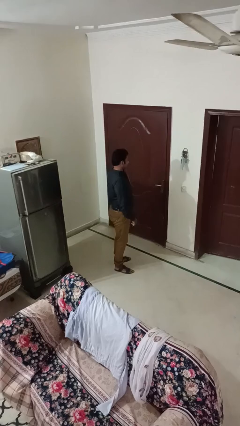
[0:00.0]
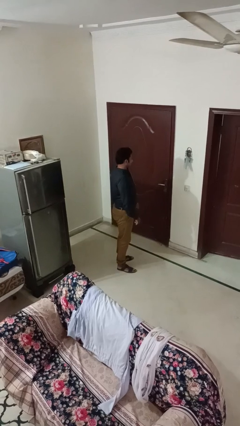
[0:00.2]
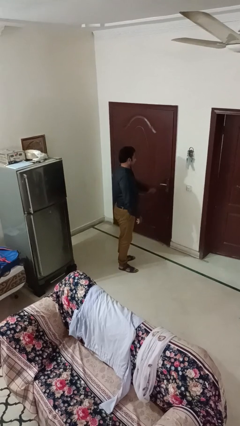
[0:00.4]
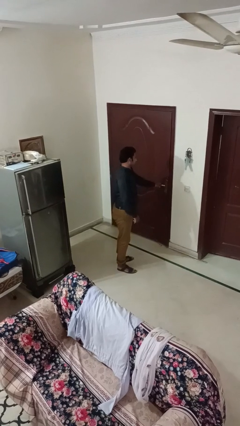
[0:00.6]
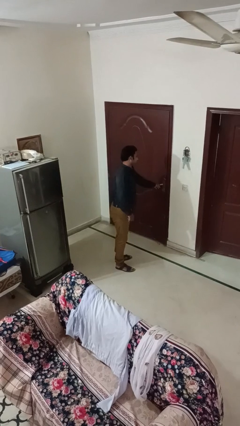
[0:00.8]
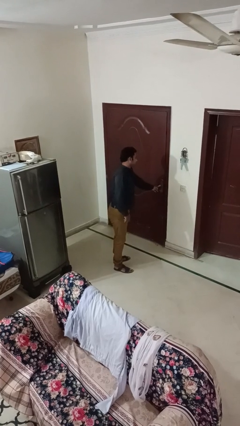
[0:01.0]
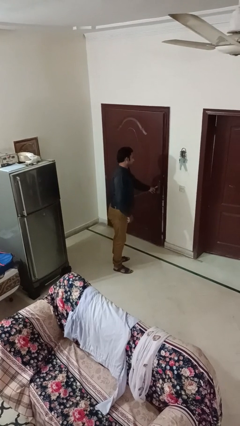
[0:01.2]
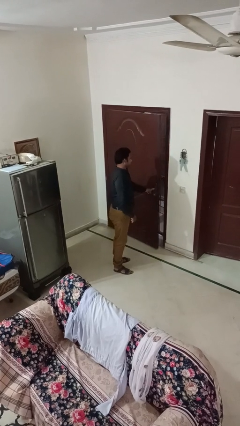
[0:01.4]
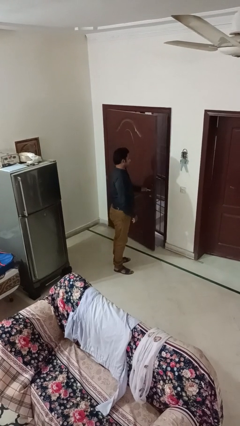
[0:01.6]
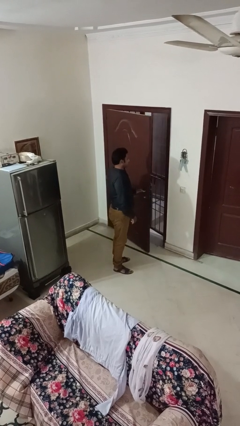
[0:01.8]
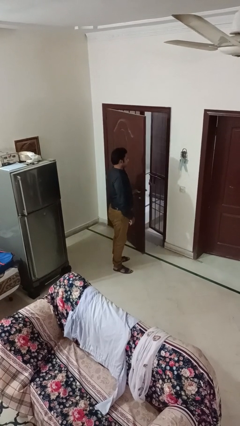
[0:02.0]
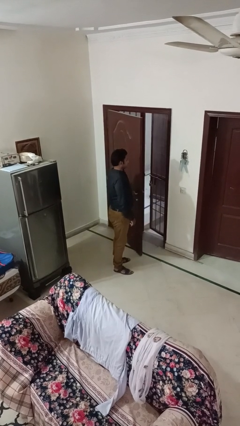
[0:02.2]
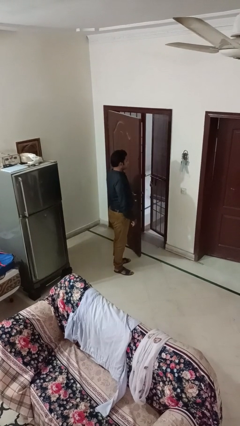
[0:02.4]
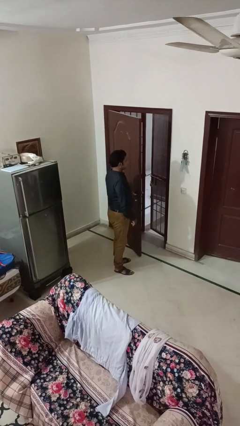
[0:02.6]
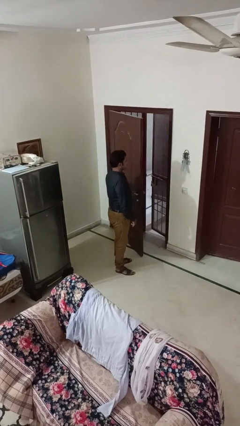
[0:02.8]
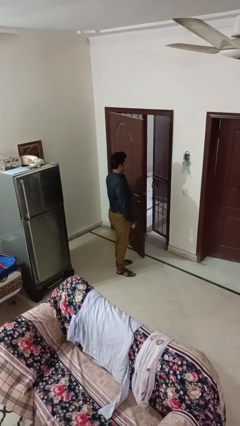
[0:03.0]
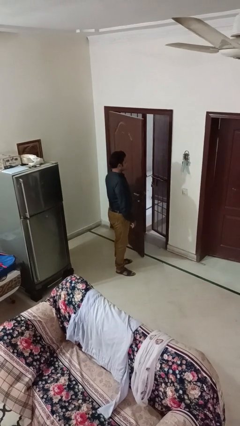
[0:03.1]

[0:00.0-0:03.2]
person opens facility door

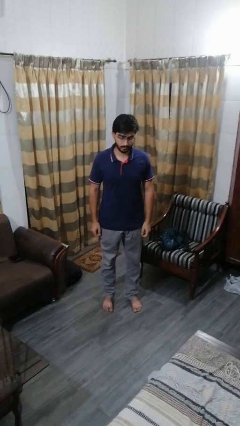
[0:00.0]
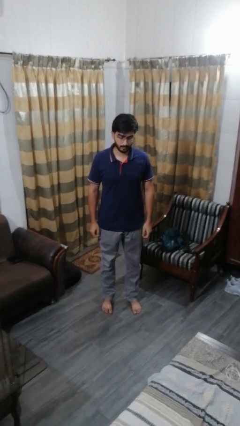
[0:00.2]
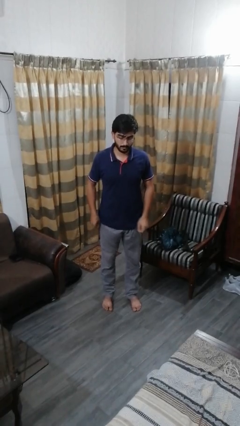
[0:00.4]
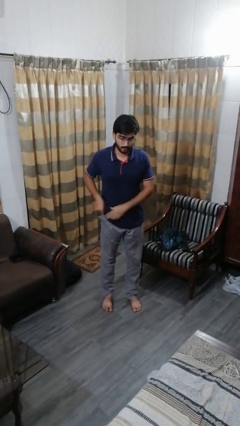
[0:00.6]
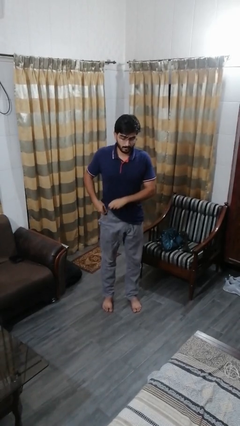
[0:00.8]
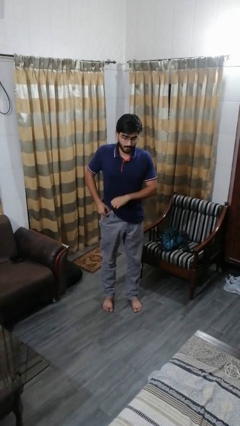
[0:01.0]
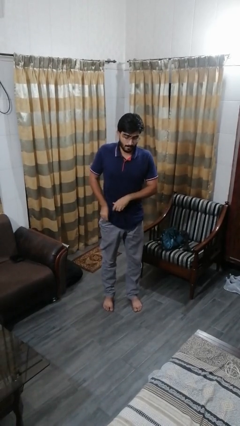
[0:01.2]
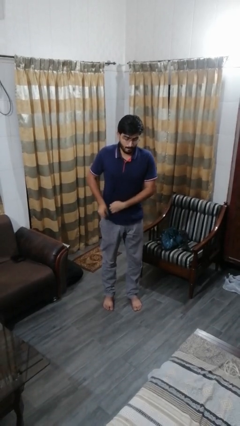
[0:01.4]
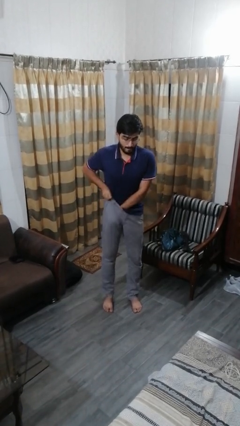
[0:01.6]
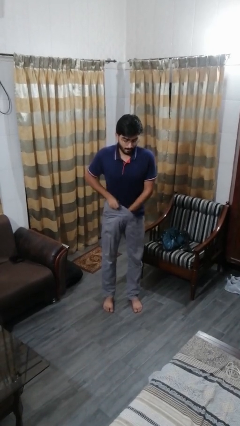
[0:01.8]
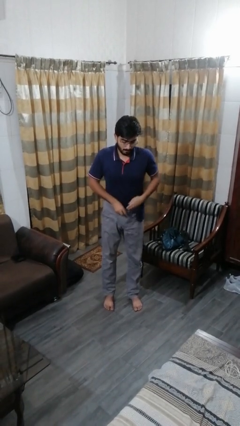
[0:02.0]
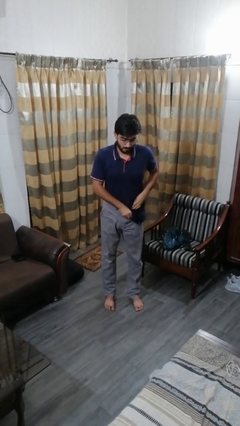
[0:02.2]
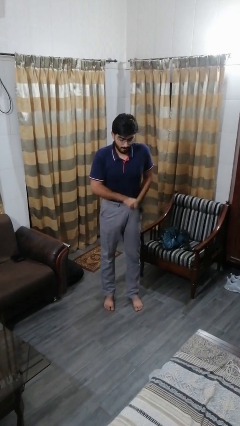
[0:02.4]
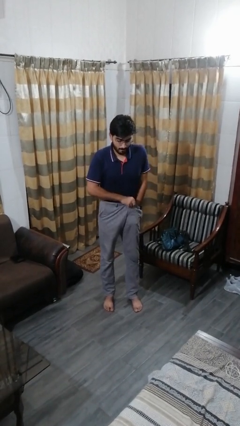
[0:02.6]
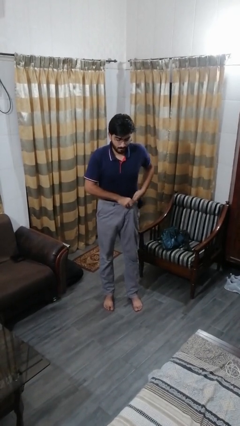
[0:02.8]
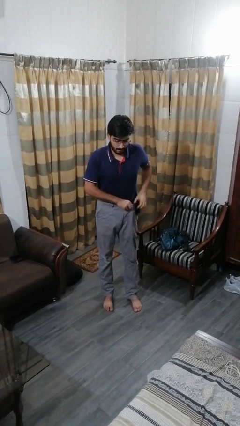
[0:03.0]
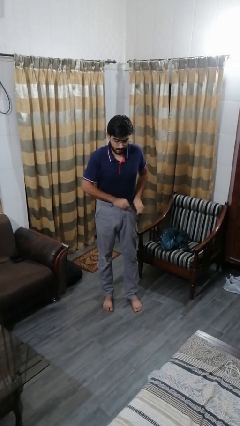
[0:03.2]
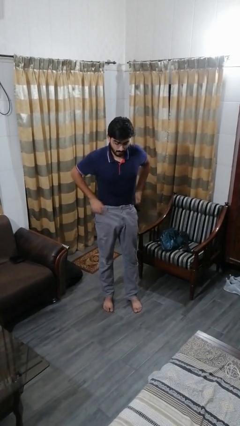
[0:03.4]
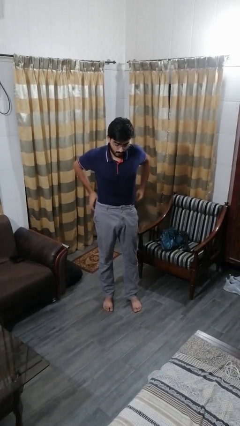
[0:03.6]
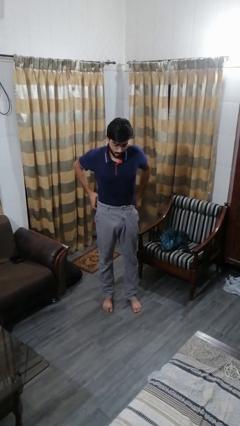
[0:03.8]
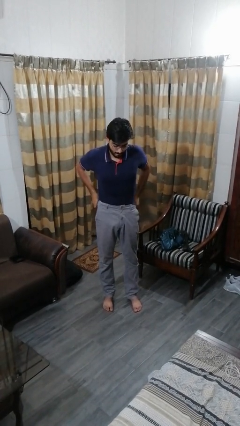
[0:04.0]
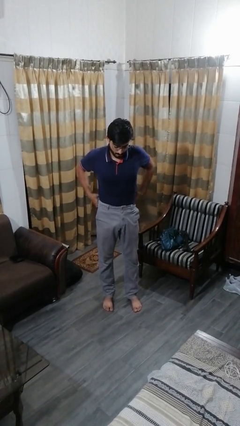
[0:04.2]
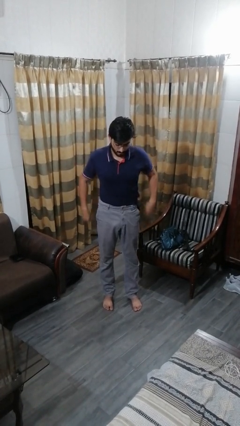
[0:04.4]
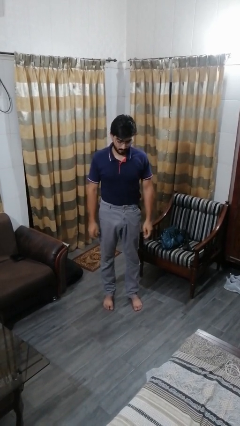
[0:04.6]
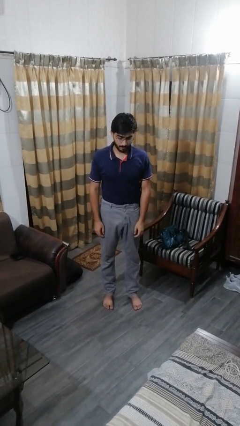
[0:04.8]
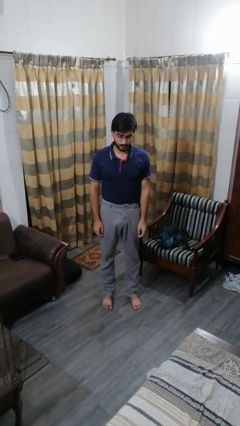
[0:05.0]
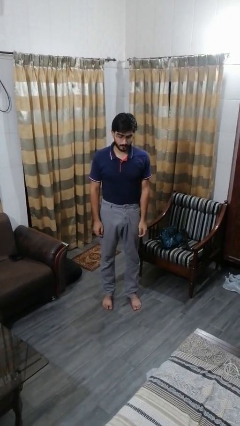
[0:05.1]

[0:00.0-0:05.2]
person tucks in shirt

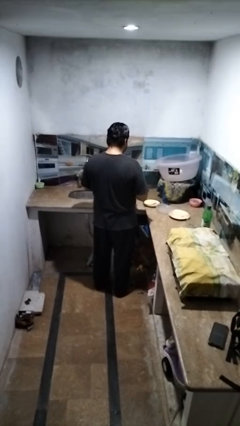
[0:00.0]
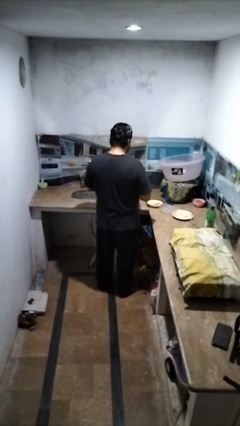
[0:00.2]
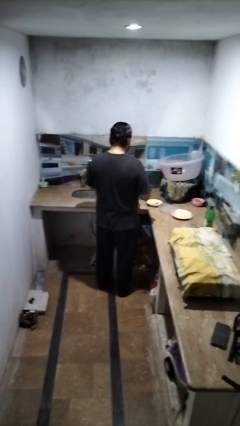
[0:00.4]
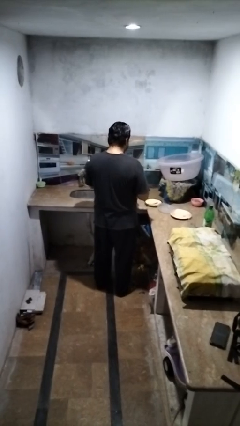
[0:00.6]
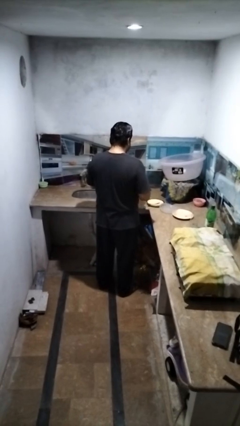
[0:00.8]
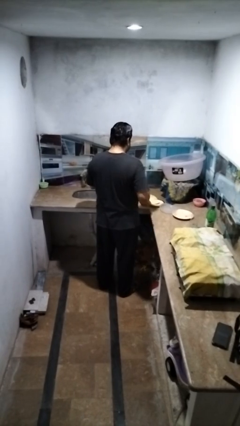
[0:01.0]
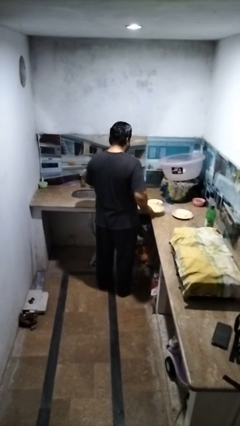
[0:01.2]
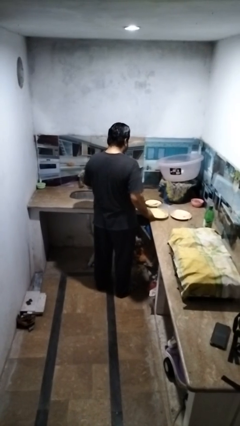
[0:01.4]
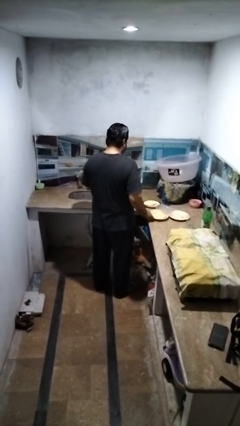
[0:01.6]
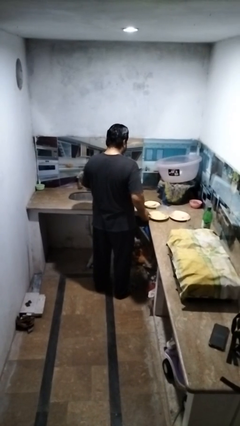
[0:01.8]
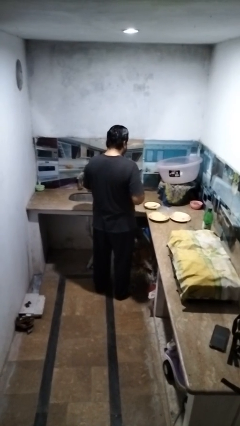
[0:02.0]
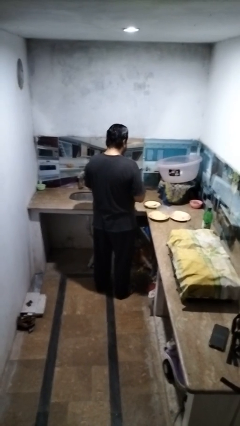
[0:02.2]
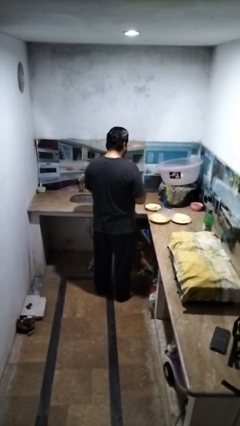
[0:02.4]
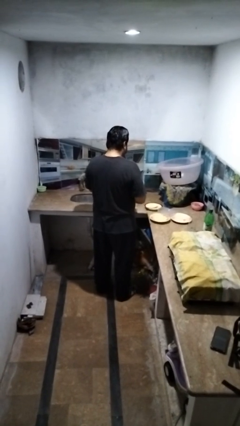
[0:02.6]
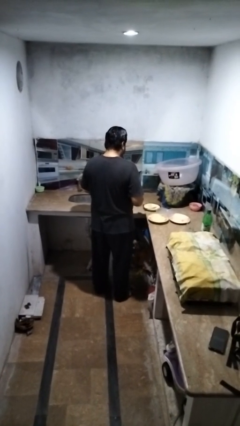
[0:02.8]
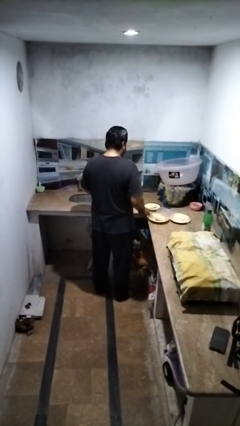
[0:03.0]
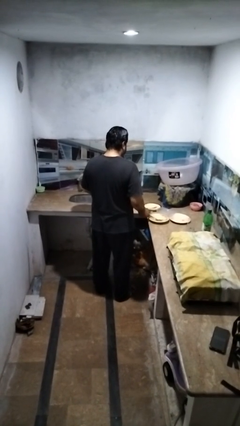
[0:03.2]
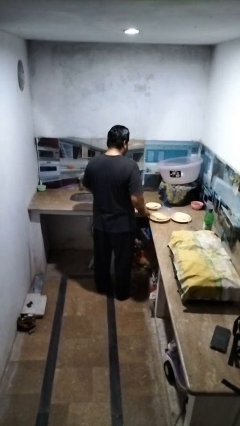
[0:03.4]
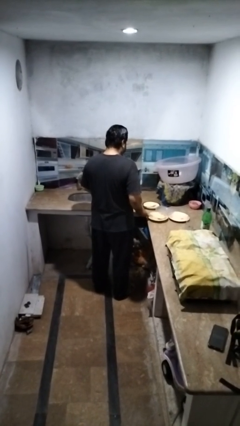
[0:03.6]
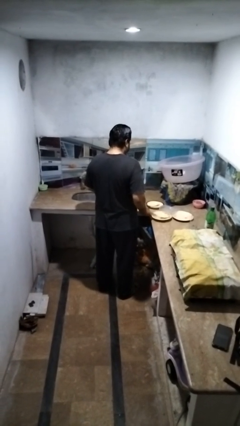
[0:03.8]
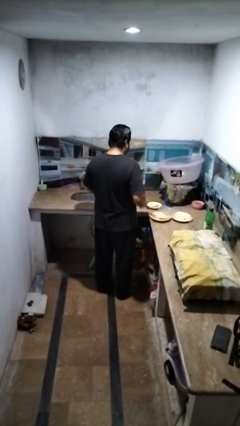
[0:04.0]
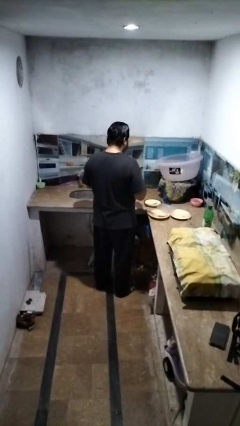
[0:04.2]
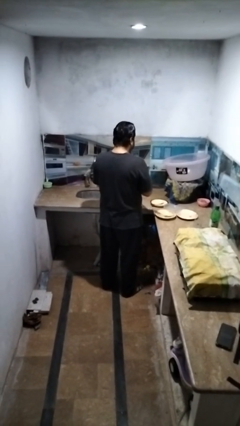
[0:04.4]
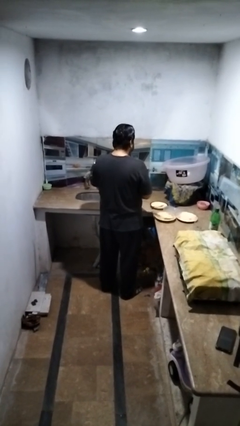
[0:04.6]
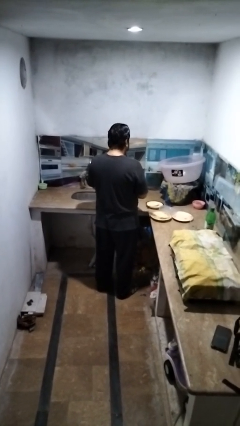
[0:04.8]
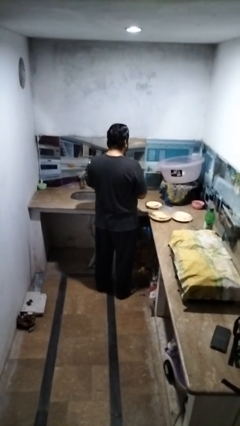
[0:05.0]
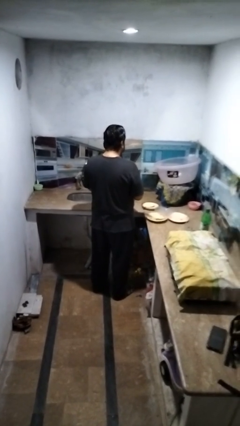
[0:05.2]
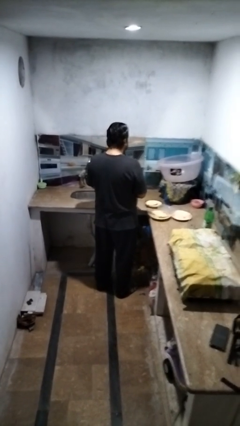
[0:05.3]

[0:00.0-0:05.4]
person sets table

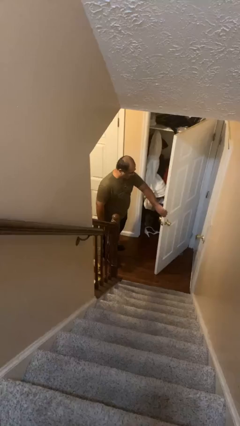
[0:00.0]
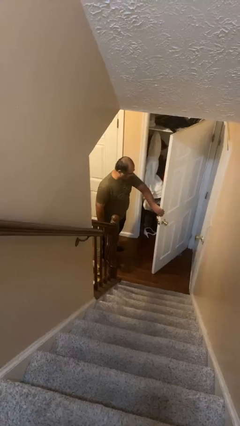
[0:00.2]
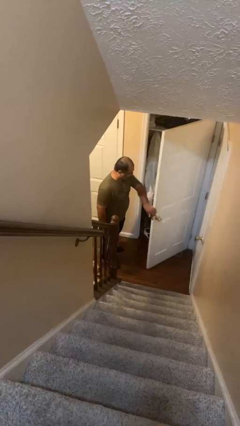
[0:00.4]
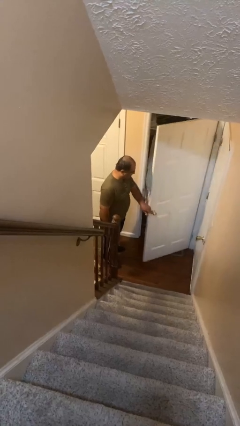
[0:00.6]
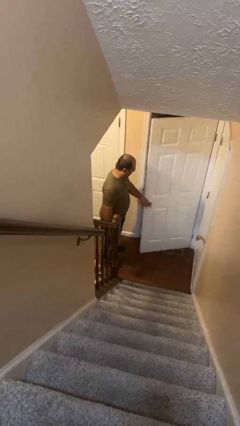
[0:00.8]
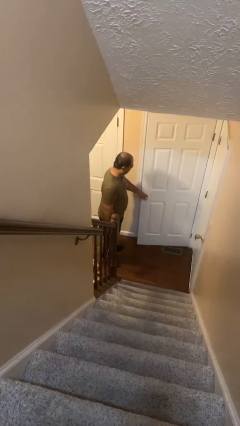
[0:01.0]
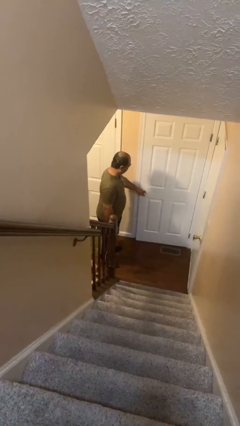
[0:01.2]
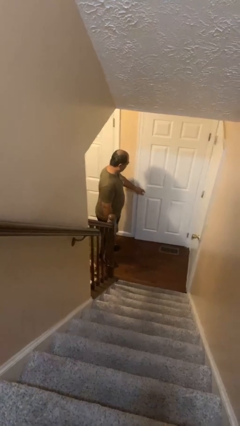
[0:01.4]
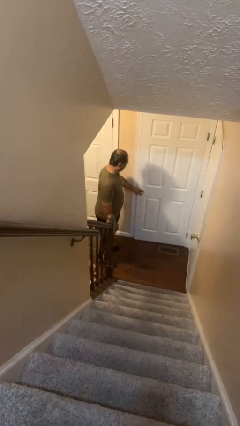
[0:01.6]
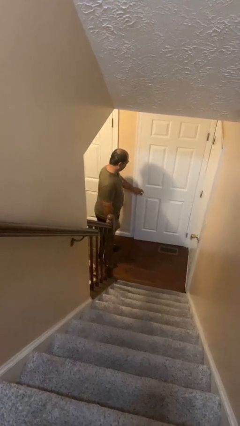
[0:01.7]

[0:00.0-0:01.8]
person closes facility door

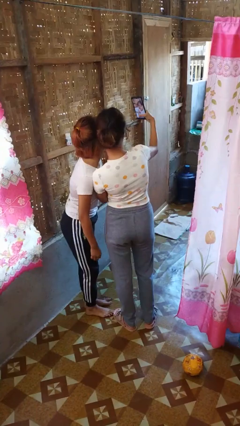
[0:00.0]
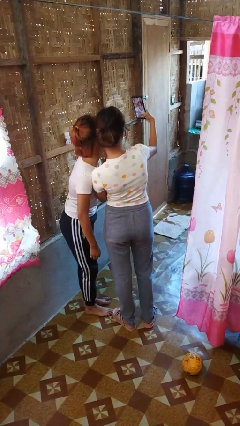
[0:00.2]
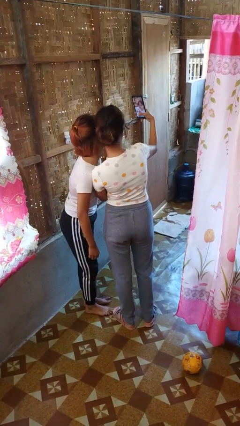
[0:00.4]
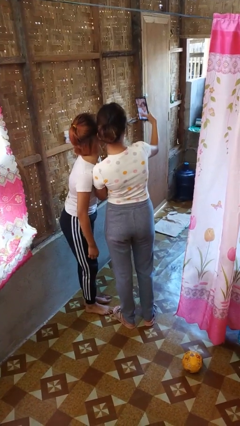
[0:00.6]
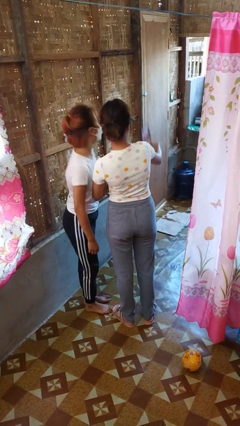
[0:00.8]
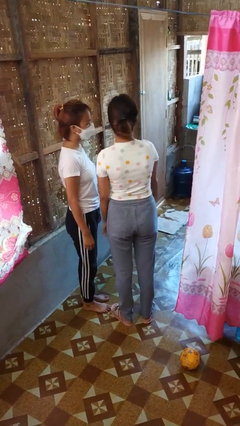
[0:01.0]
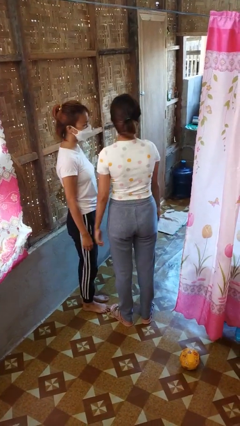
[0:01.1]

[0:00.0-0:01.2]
person takes selfie with person

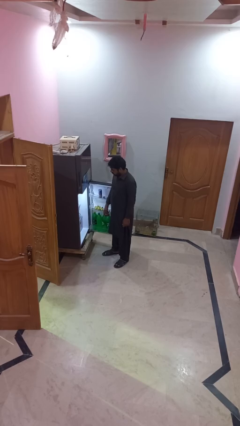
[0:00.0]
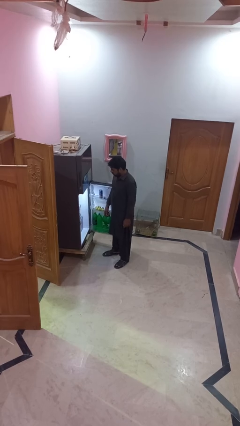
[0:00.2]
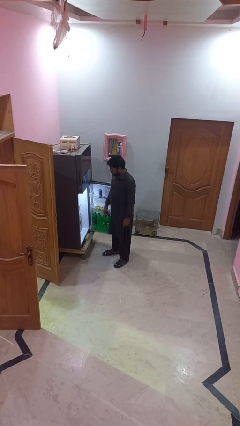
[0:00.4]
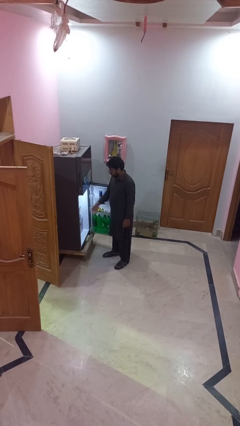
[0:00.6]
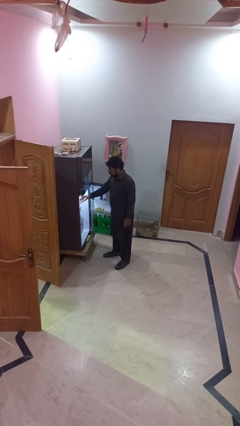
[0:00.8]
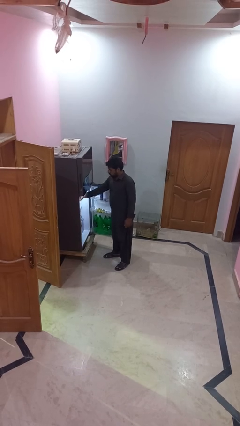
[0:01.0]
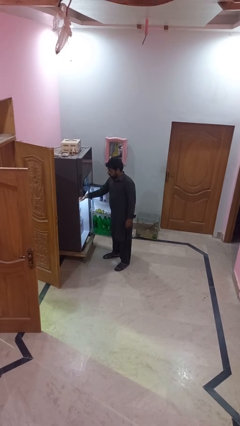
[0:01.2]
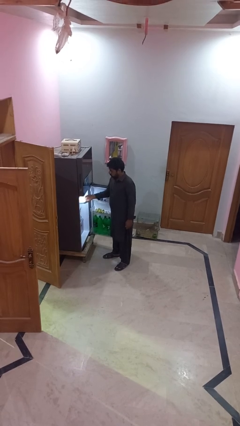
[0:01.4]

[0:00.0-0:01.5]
person takes object from refrigerator
